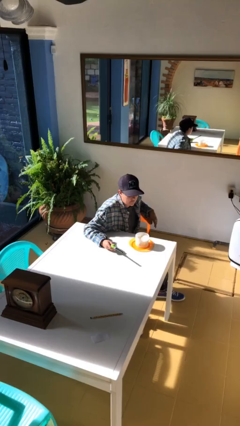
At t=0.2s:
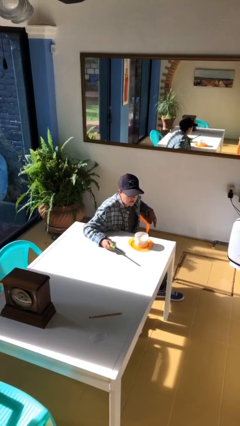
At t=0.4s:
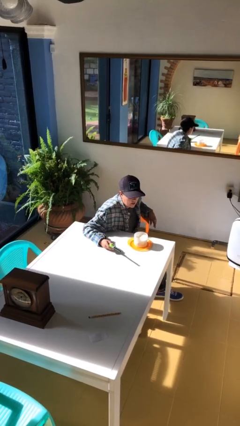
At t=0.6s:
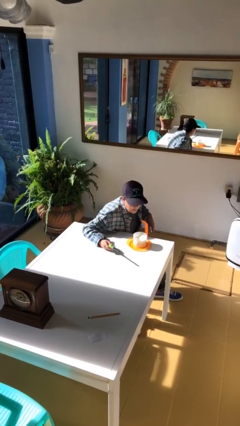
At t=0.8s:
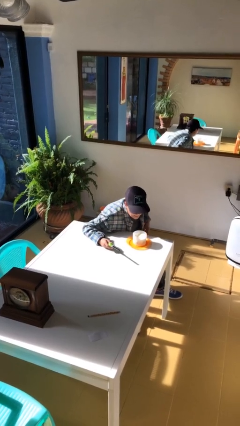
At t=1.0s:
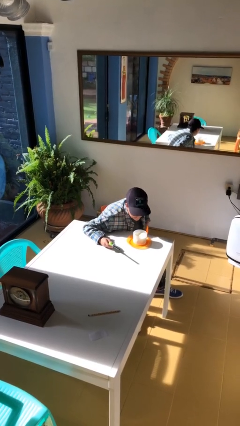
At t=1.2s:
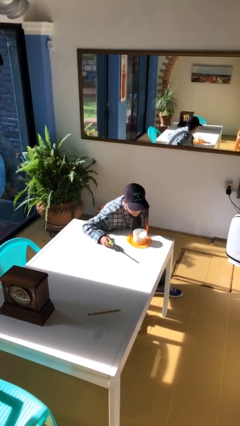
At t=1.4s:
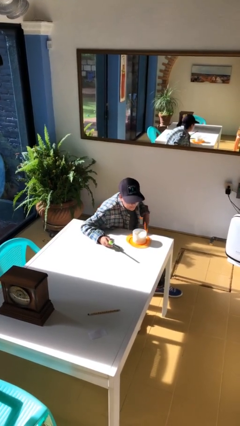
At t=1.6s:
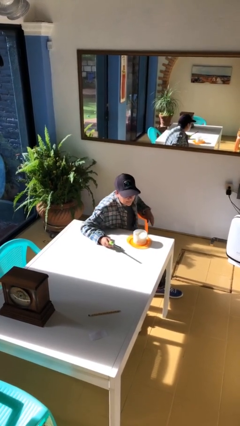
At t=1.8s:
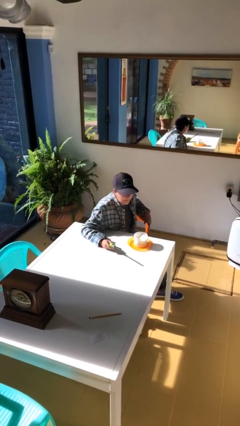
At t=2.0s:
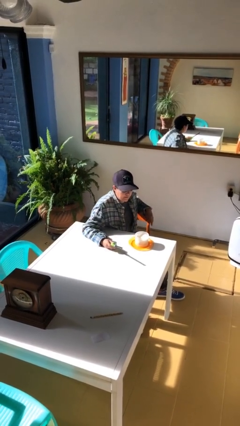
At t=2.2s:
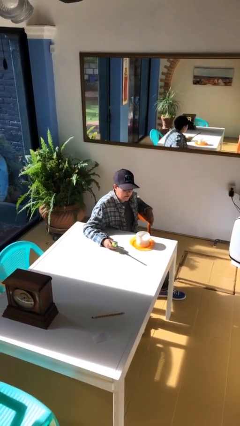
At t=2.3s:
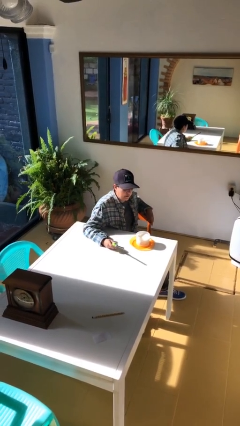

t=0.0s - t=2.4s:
person extinguishes candle

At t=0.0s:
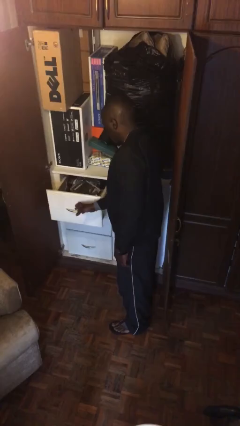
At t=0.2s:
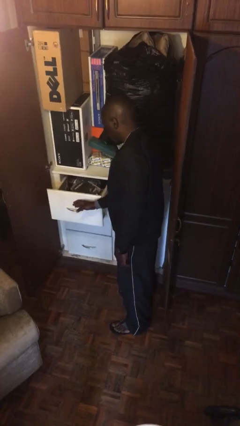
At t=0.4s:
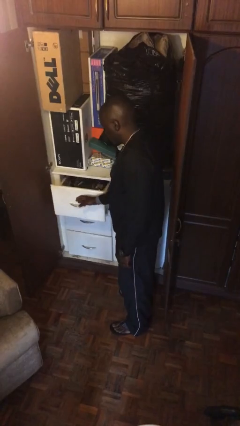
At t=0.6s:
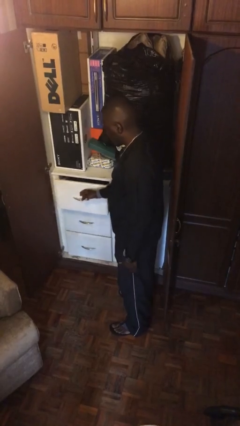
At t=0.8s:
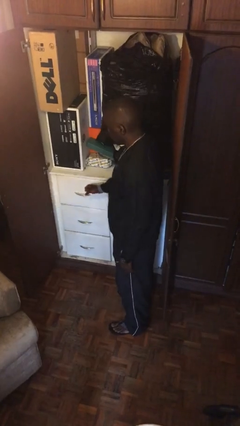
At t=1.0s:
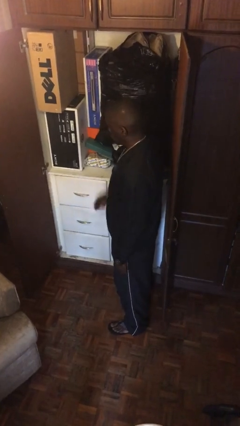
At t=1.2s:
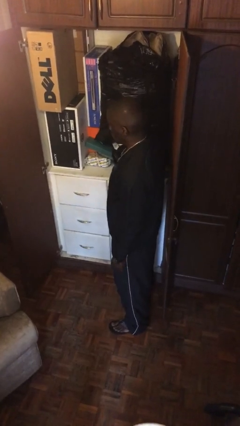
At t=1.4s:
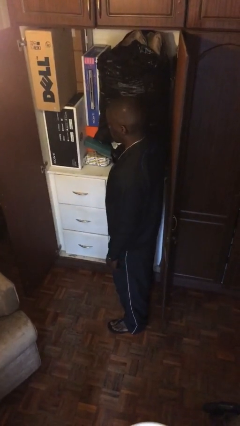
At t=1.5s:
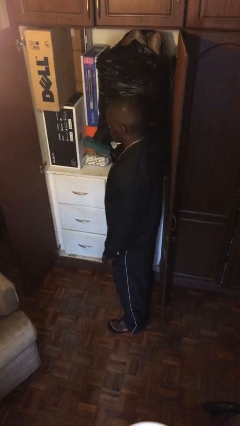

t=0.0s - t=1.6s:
person closes dresser drawer

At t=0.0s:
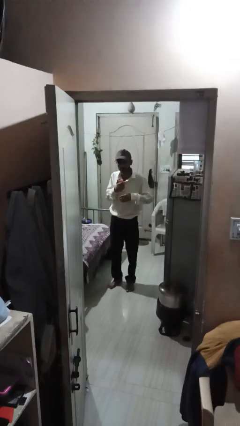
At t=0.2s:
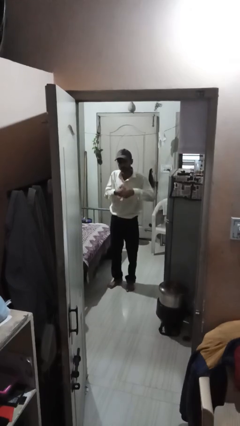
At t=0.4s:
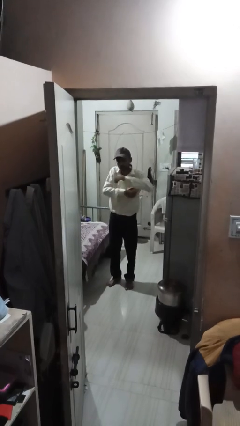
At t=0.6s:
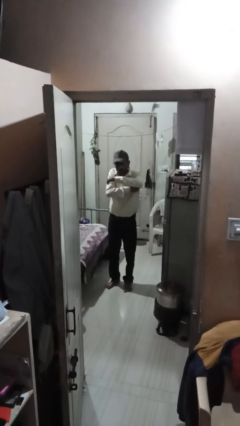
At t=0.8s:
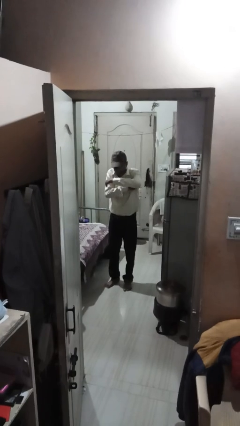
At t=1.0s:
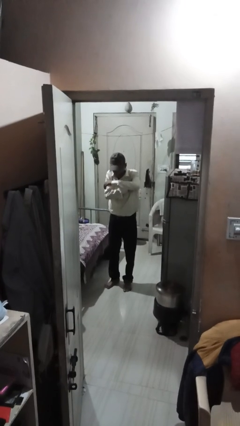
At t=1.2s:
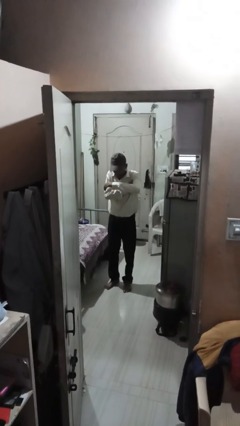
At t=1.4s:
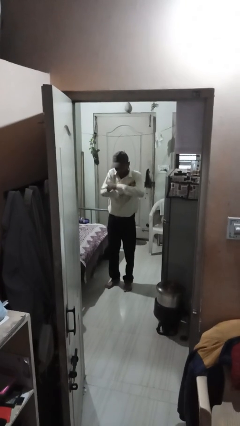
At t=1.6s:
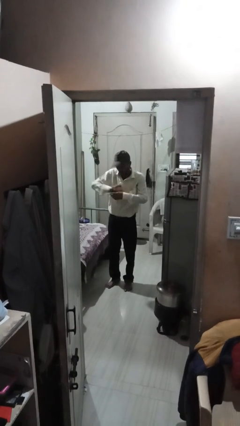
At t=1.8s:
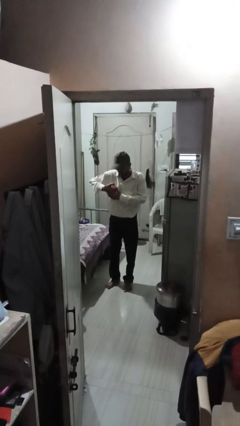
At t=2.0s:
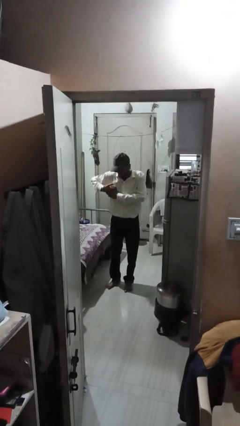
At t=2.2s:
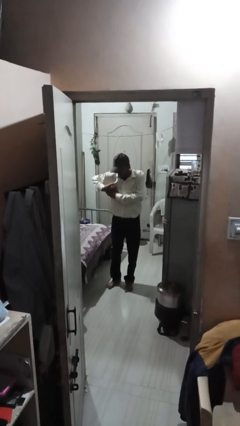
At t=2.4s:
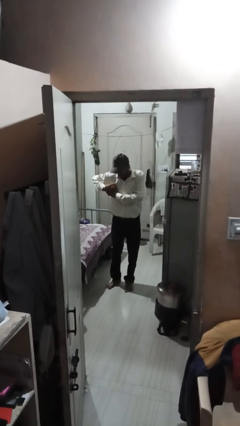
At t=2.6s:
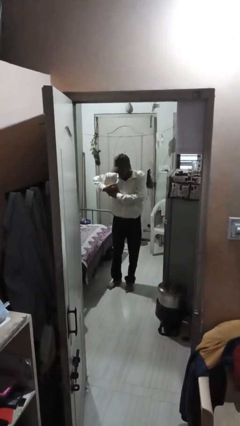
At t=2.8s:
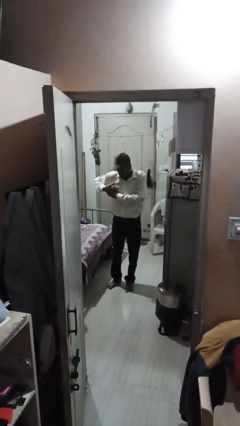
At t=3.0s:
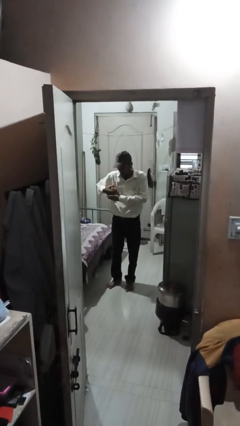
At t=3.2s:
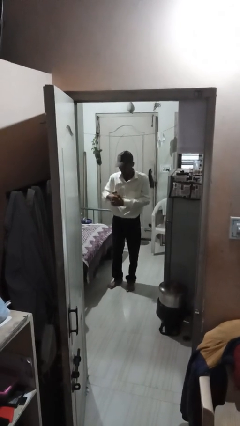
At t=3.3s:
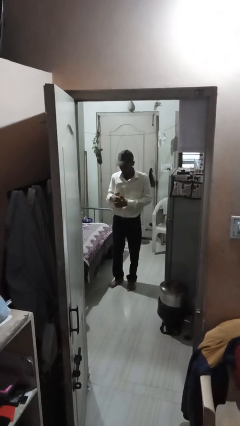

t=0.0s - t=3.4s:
person applies deodorant

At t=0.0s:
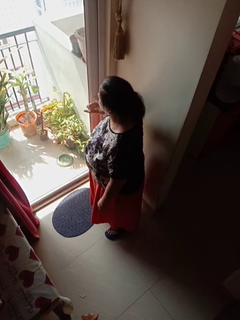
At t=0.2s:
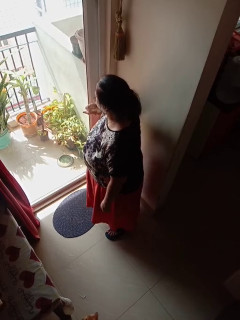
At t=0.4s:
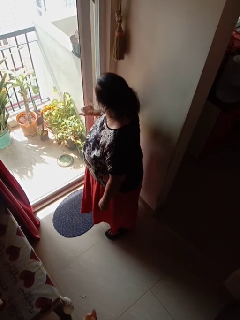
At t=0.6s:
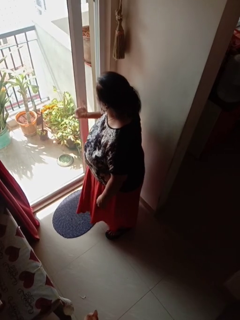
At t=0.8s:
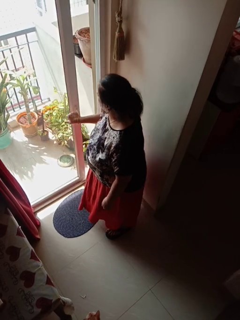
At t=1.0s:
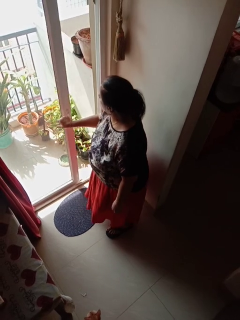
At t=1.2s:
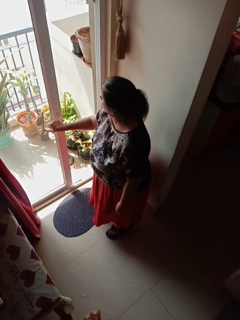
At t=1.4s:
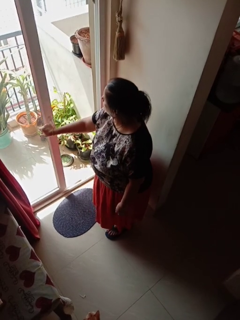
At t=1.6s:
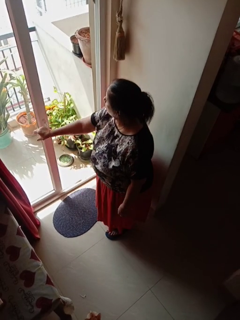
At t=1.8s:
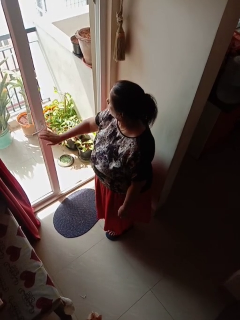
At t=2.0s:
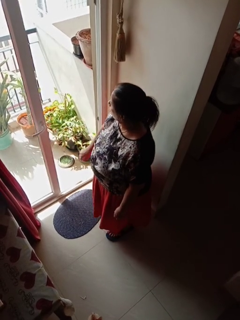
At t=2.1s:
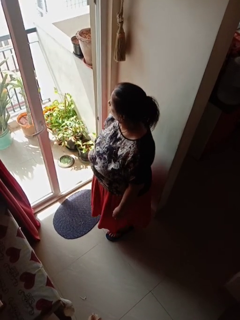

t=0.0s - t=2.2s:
person opens sliding door

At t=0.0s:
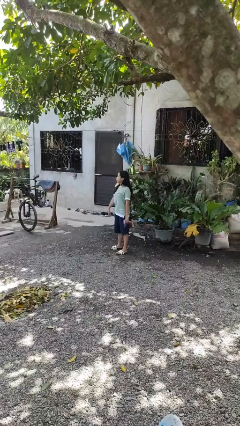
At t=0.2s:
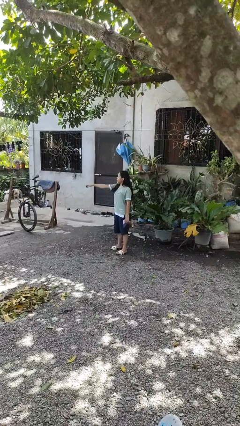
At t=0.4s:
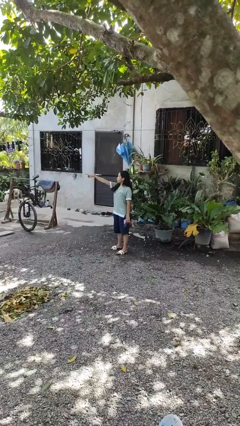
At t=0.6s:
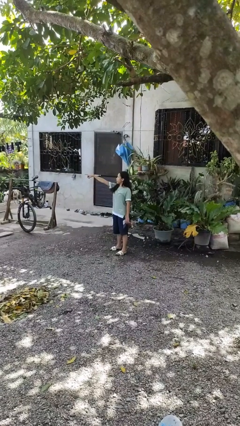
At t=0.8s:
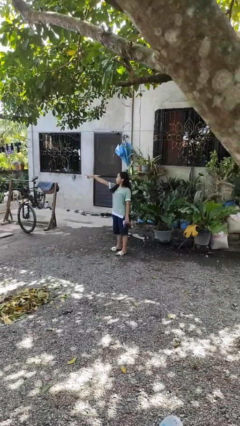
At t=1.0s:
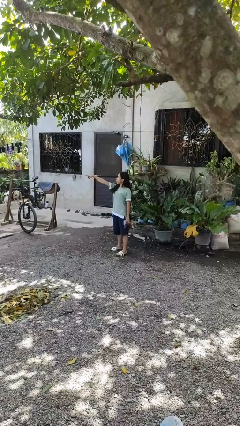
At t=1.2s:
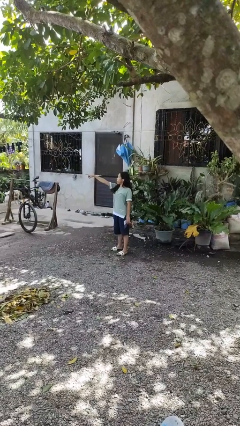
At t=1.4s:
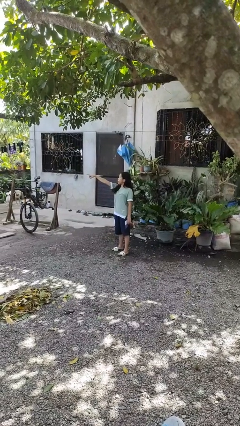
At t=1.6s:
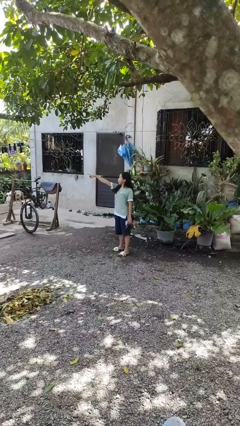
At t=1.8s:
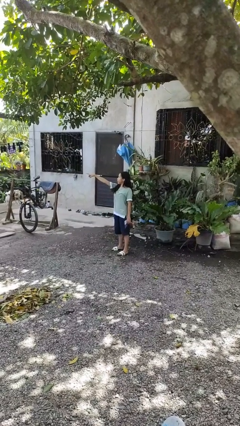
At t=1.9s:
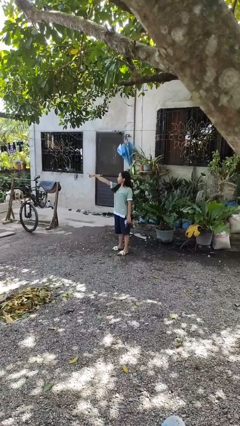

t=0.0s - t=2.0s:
person points at person

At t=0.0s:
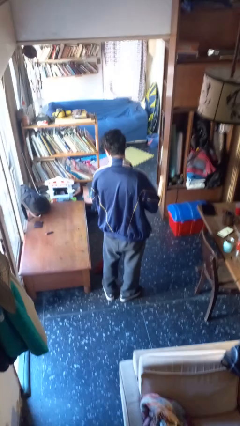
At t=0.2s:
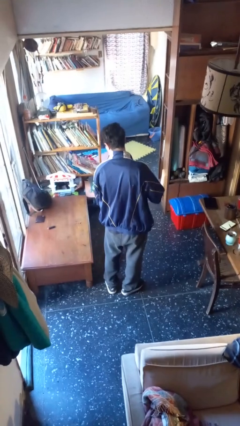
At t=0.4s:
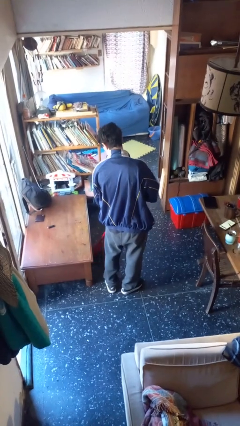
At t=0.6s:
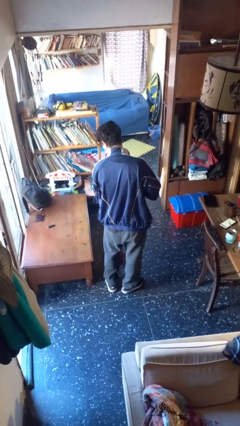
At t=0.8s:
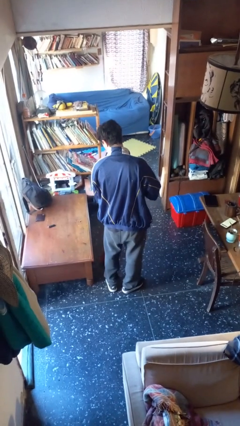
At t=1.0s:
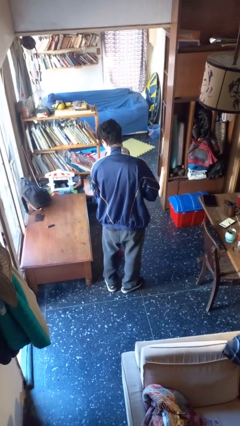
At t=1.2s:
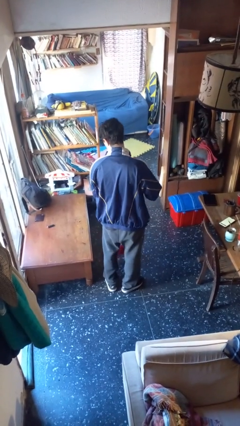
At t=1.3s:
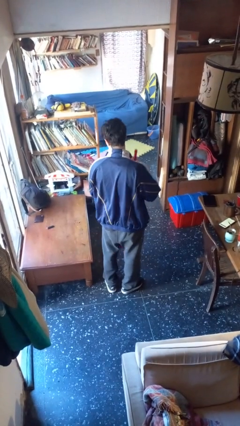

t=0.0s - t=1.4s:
person sweeps floor

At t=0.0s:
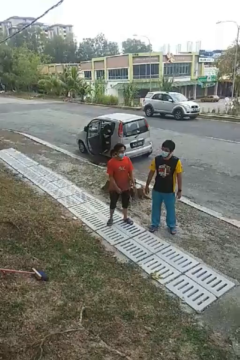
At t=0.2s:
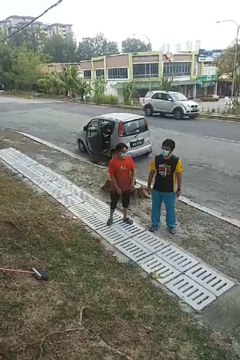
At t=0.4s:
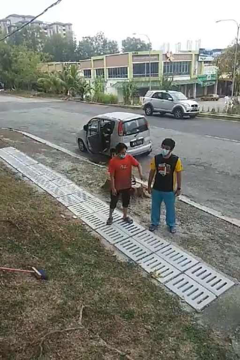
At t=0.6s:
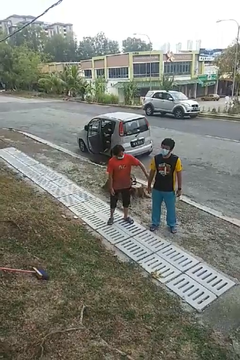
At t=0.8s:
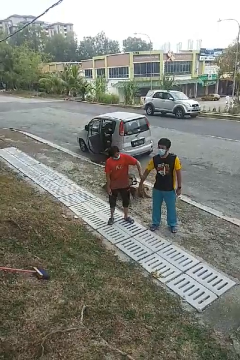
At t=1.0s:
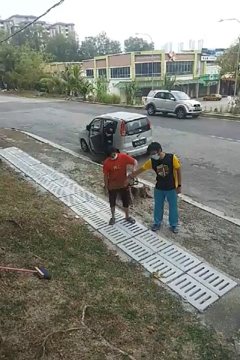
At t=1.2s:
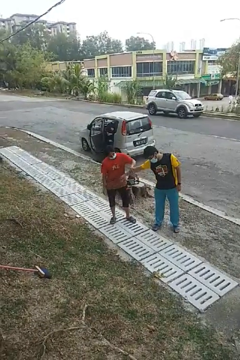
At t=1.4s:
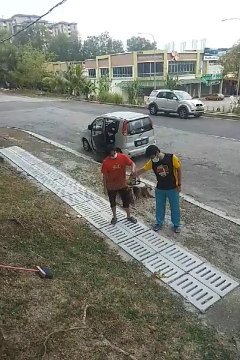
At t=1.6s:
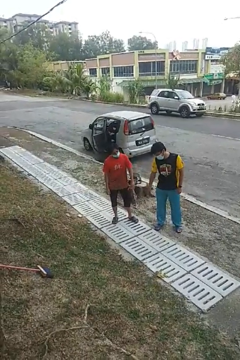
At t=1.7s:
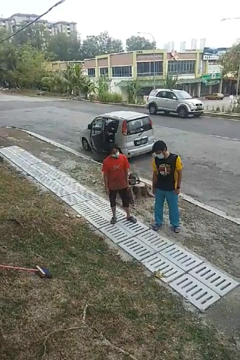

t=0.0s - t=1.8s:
person grabs person by forearm

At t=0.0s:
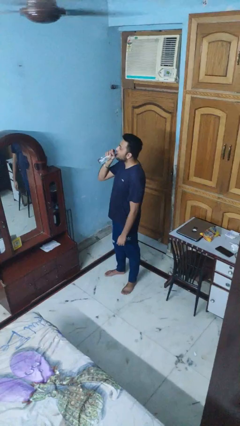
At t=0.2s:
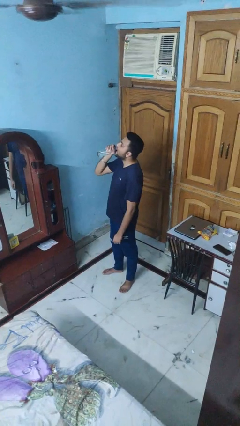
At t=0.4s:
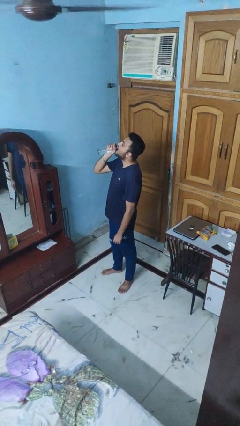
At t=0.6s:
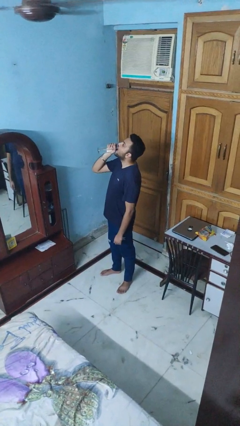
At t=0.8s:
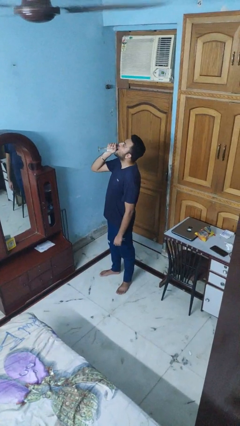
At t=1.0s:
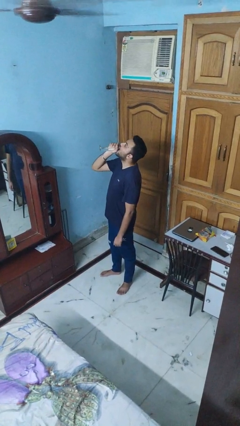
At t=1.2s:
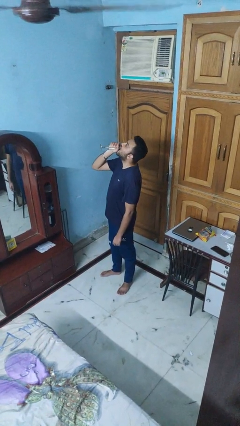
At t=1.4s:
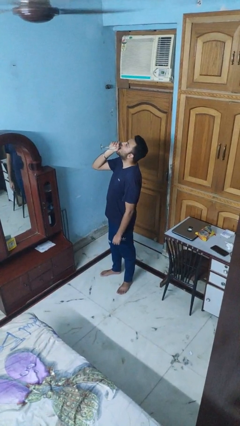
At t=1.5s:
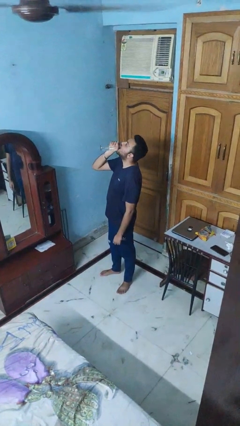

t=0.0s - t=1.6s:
person drinks from bottle

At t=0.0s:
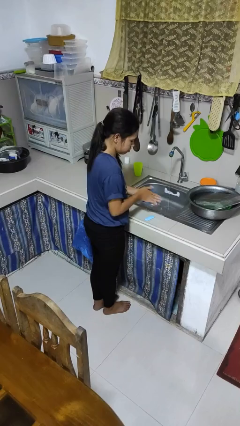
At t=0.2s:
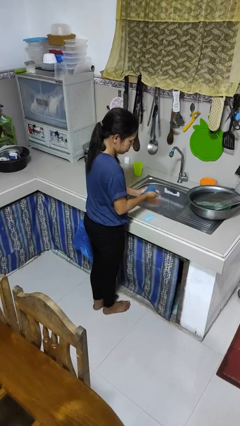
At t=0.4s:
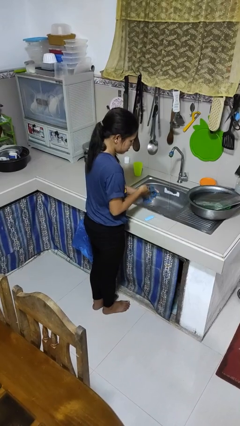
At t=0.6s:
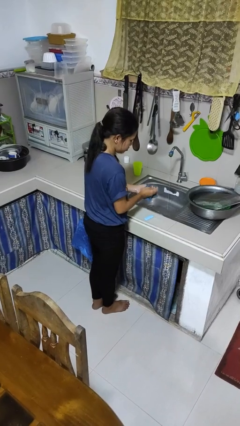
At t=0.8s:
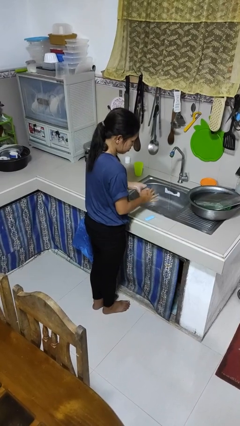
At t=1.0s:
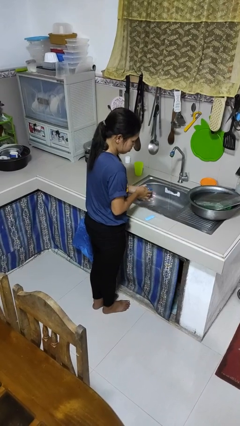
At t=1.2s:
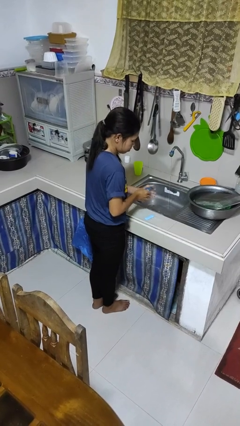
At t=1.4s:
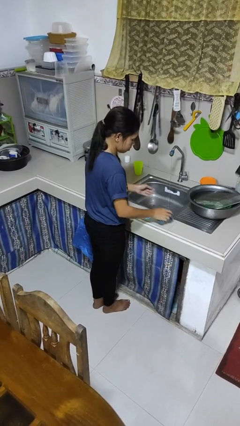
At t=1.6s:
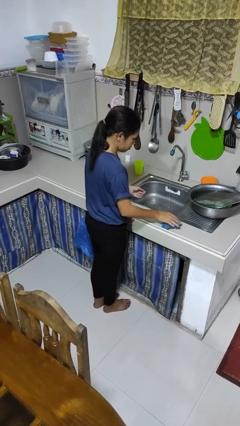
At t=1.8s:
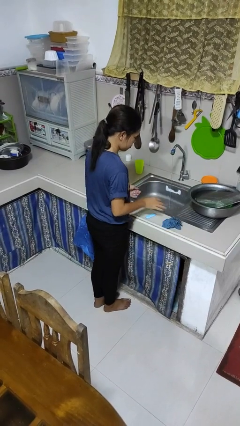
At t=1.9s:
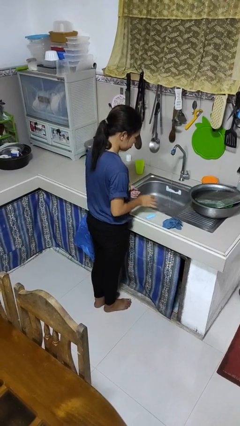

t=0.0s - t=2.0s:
person dries hands with towel
